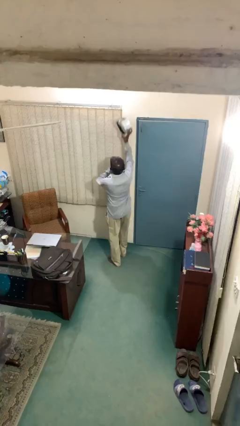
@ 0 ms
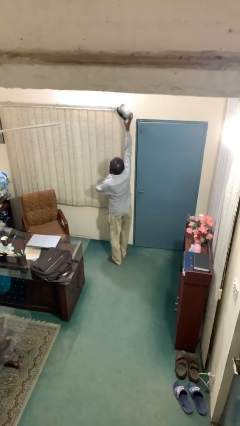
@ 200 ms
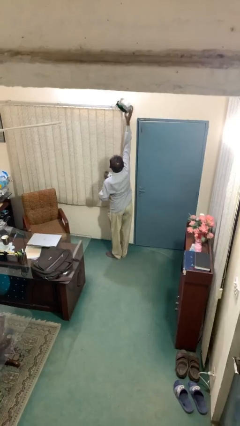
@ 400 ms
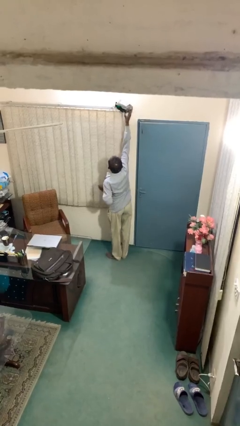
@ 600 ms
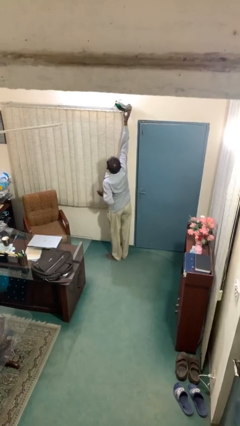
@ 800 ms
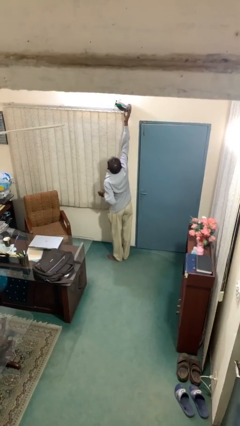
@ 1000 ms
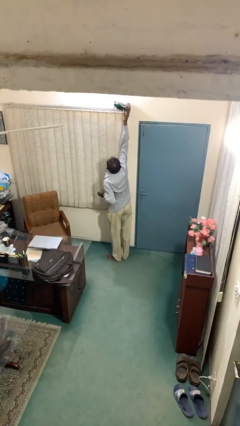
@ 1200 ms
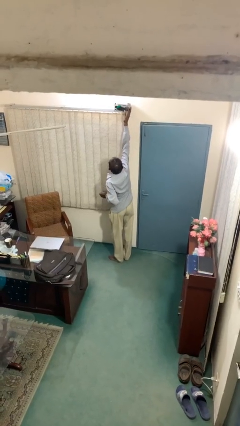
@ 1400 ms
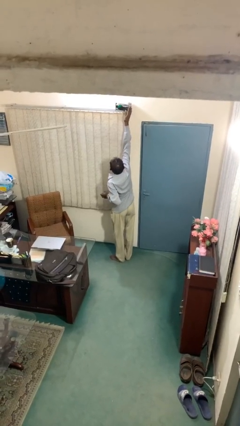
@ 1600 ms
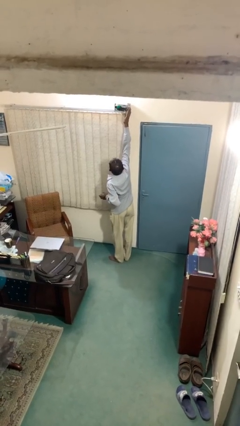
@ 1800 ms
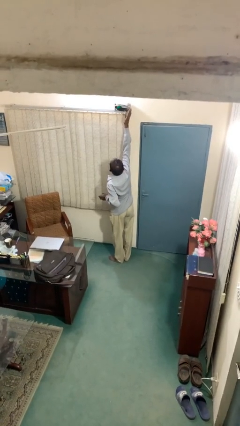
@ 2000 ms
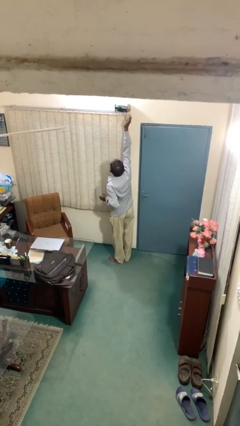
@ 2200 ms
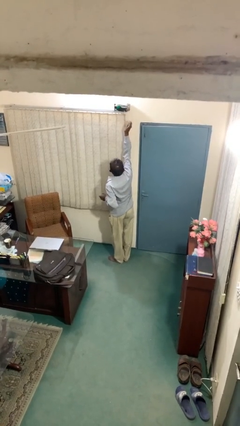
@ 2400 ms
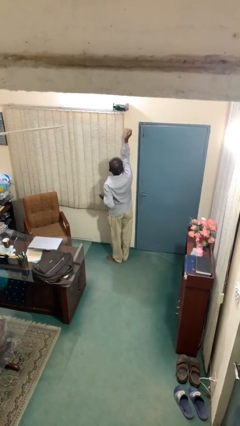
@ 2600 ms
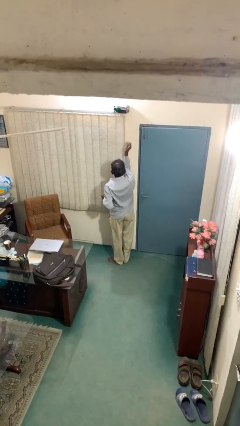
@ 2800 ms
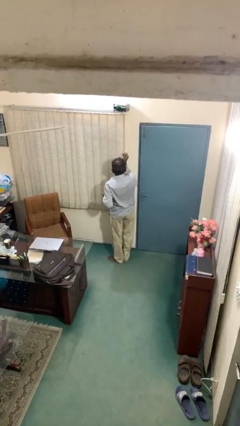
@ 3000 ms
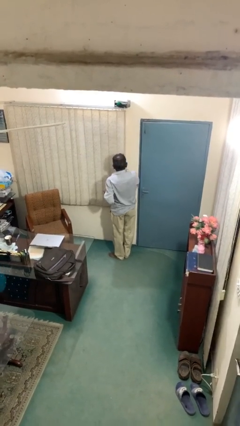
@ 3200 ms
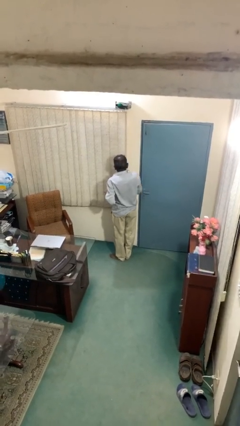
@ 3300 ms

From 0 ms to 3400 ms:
person puts down object on shelf

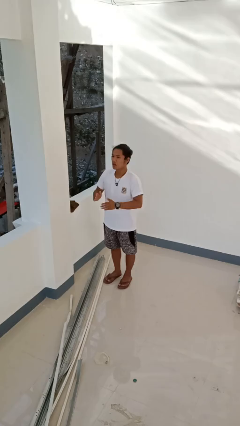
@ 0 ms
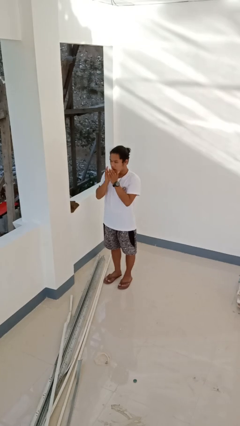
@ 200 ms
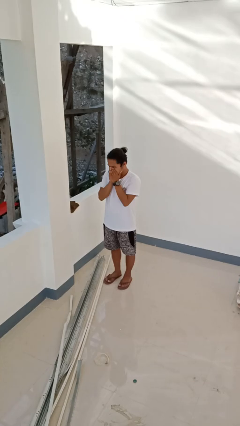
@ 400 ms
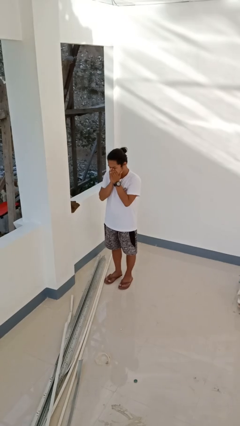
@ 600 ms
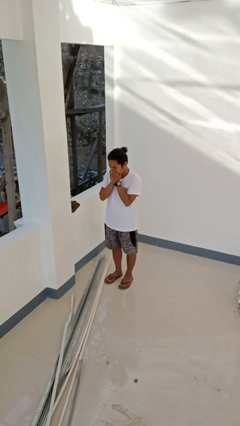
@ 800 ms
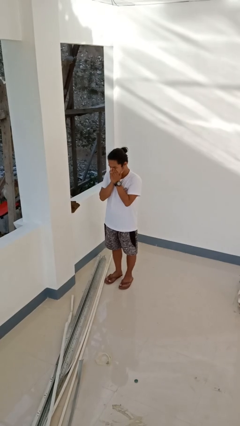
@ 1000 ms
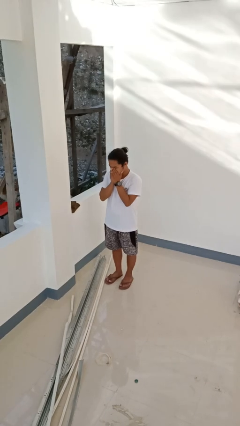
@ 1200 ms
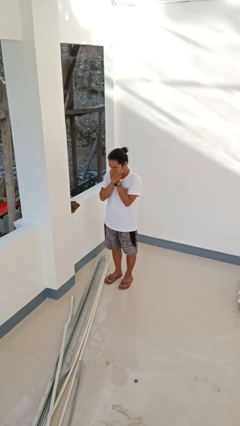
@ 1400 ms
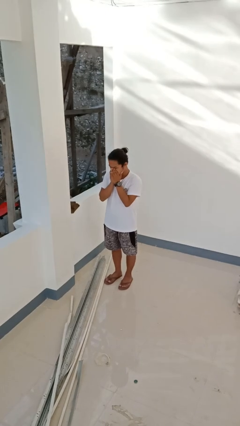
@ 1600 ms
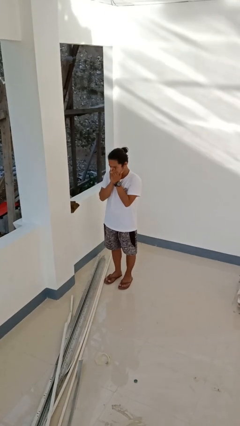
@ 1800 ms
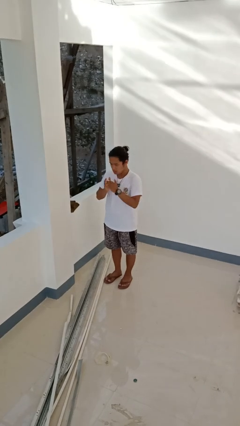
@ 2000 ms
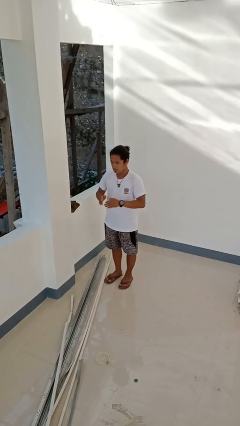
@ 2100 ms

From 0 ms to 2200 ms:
person sneezes into hand

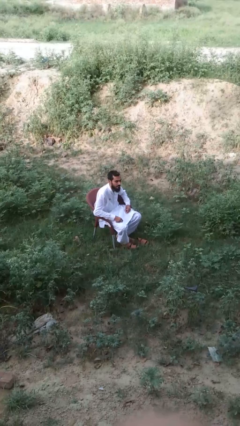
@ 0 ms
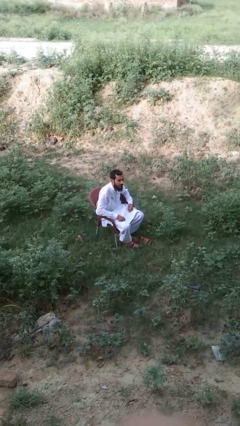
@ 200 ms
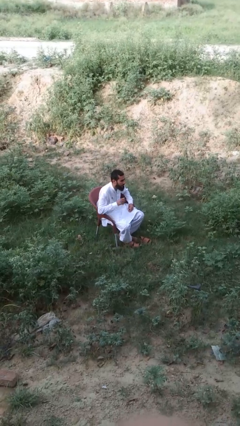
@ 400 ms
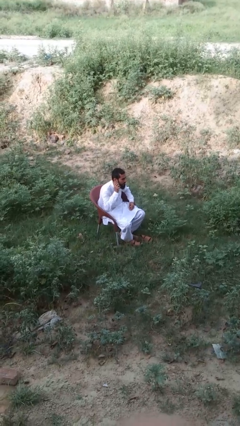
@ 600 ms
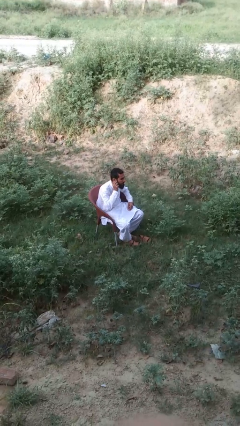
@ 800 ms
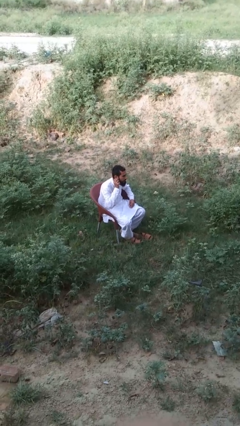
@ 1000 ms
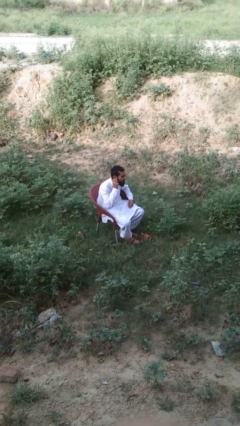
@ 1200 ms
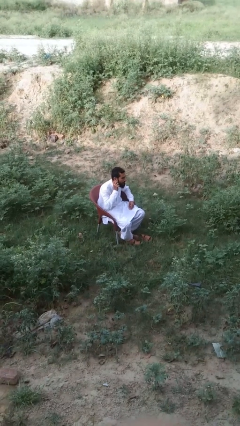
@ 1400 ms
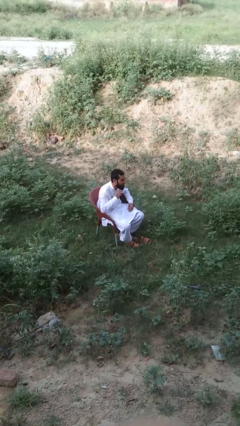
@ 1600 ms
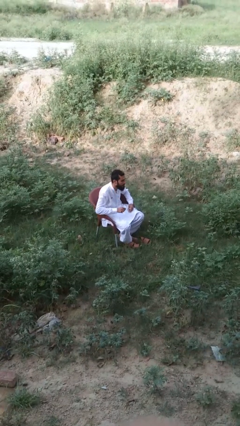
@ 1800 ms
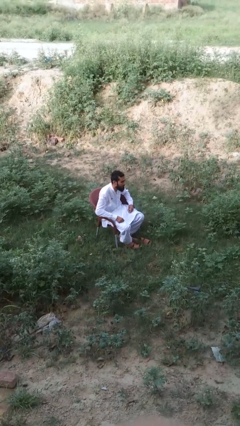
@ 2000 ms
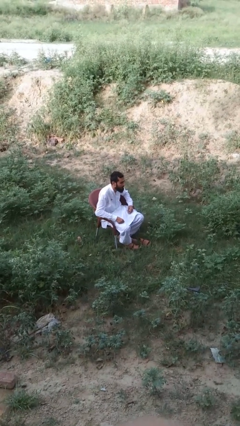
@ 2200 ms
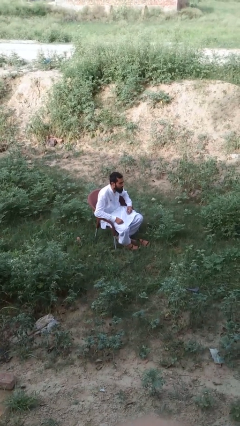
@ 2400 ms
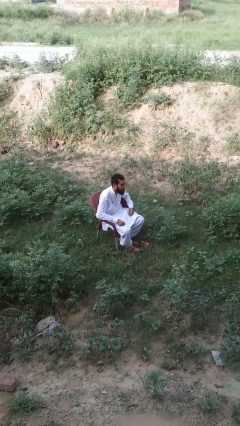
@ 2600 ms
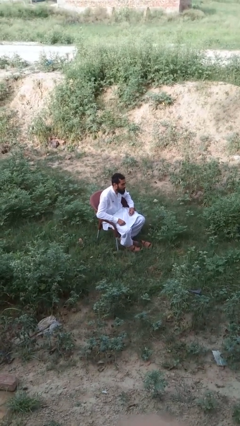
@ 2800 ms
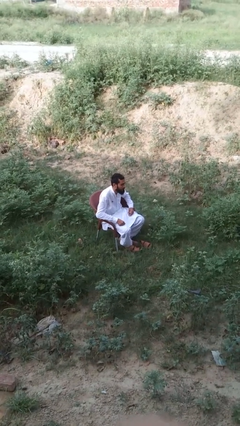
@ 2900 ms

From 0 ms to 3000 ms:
person touches earlobe

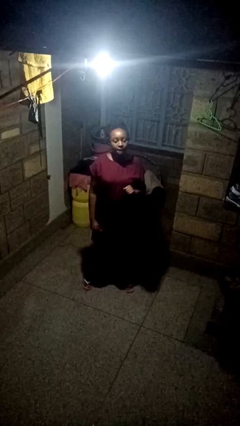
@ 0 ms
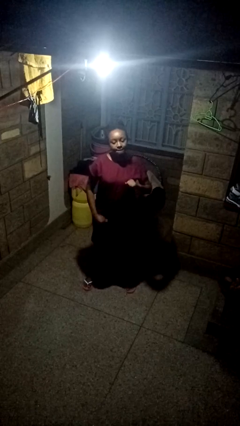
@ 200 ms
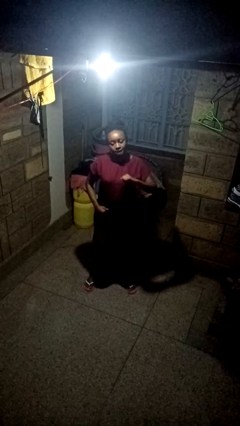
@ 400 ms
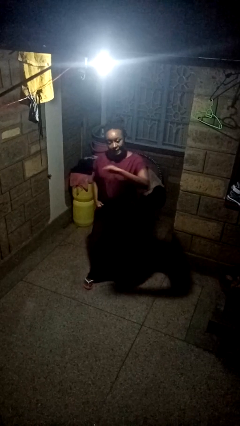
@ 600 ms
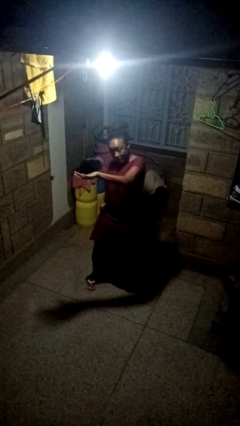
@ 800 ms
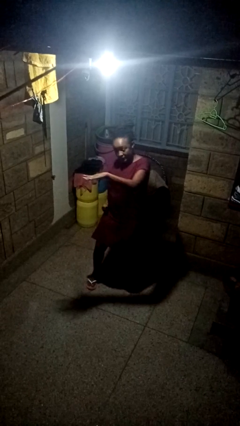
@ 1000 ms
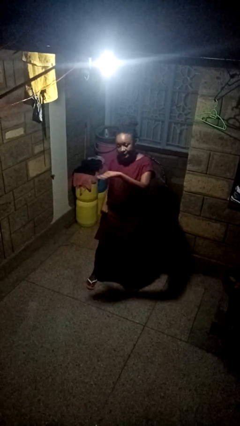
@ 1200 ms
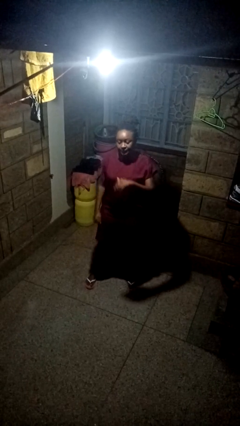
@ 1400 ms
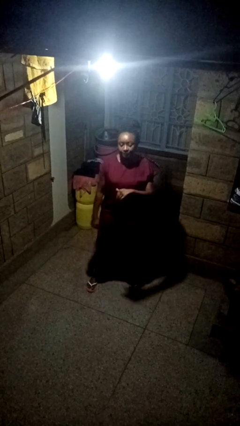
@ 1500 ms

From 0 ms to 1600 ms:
person karate chop

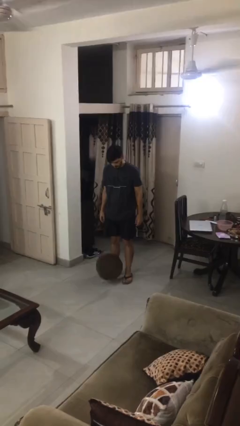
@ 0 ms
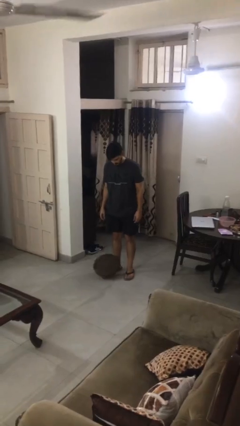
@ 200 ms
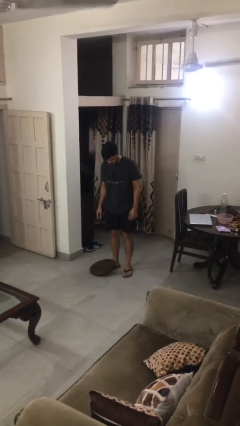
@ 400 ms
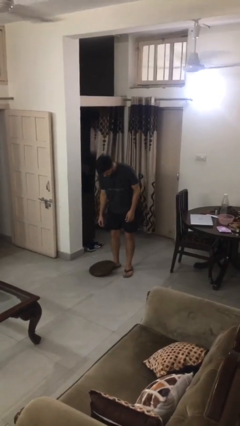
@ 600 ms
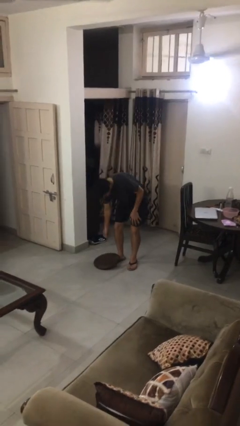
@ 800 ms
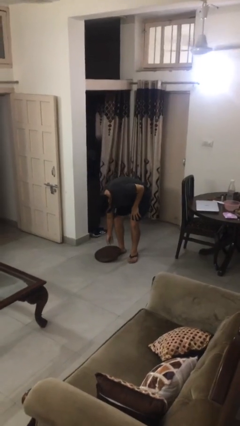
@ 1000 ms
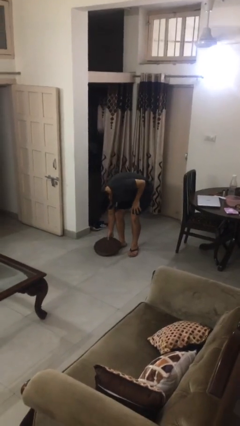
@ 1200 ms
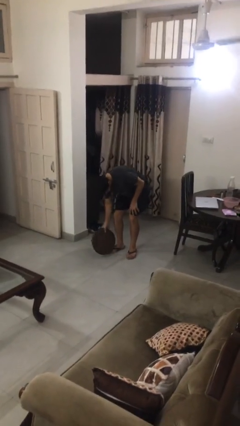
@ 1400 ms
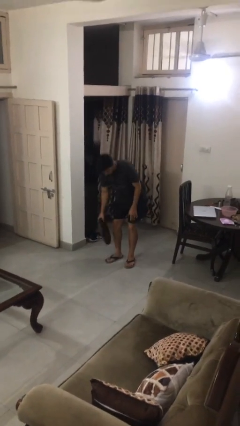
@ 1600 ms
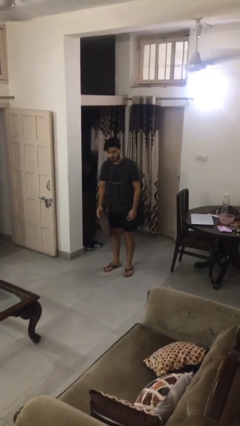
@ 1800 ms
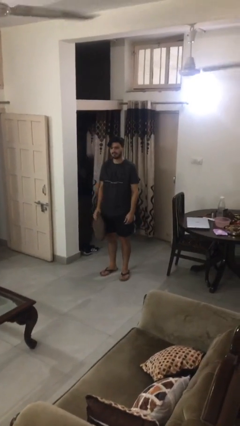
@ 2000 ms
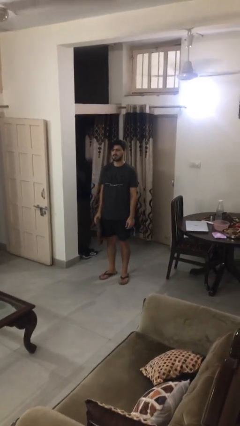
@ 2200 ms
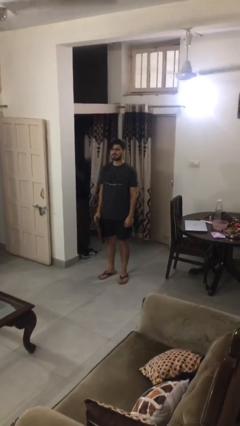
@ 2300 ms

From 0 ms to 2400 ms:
person picks up object from floor

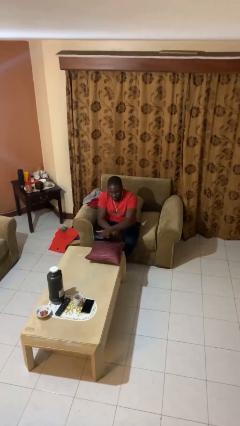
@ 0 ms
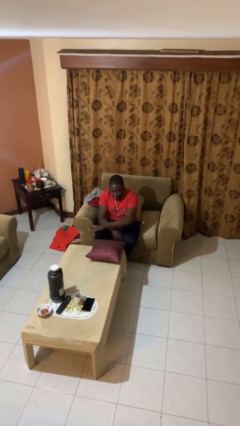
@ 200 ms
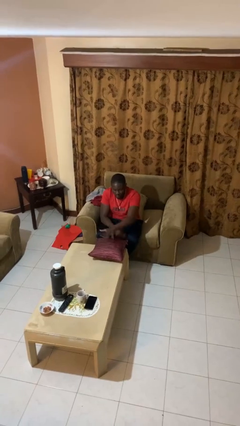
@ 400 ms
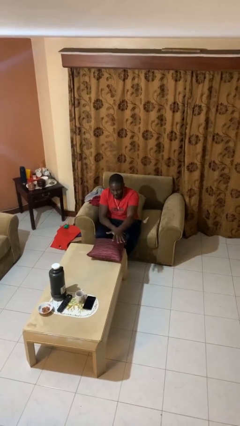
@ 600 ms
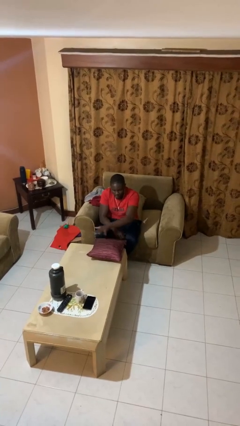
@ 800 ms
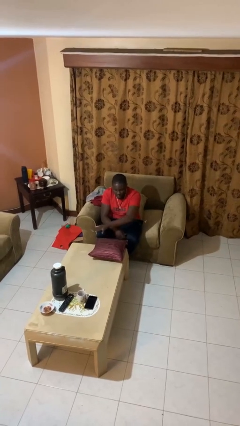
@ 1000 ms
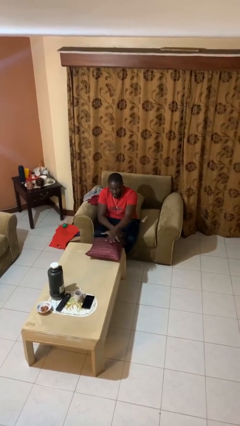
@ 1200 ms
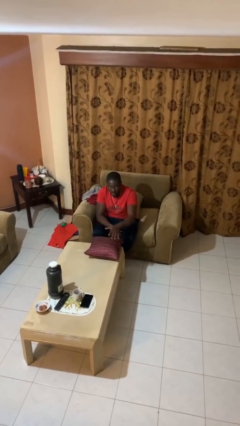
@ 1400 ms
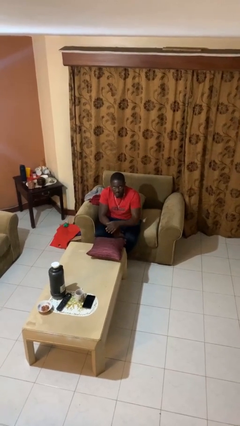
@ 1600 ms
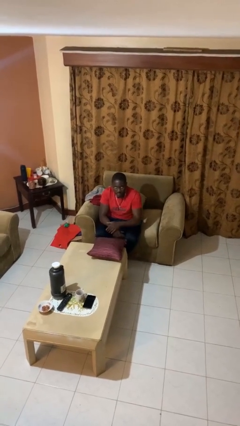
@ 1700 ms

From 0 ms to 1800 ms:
person waves hand over object

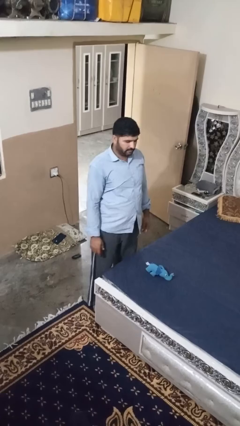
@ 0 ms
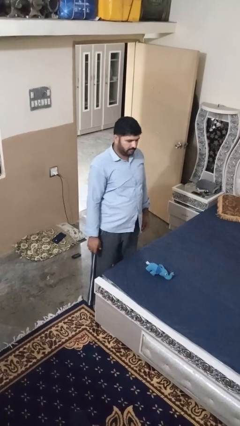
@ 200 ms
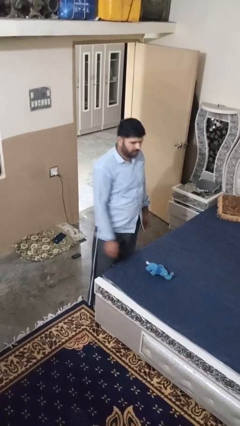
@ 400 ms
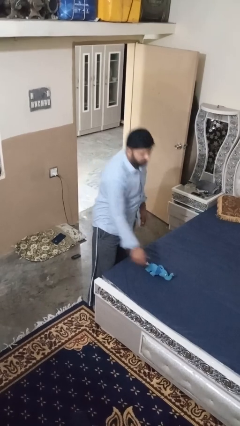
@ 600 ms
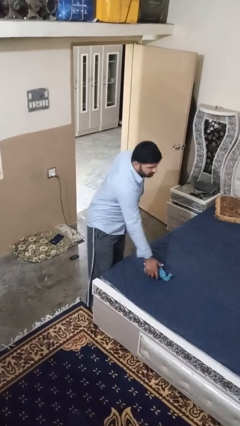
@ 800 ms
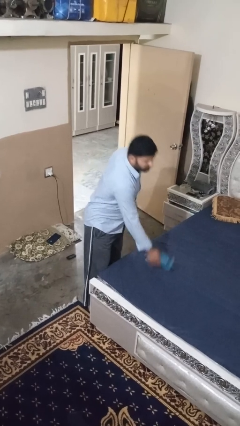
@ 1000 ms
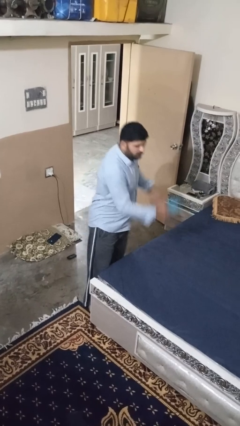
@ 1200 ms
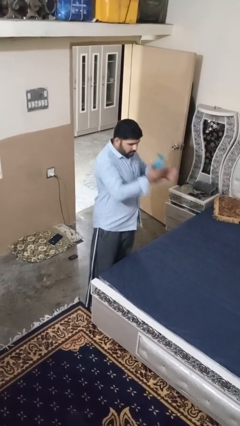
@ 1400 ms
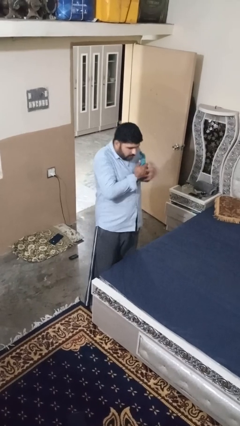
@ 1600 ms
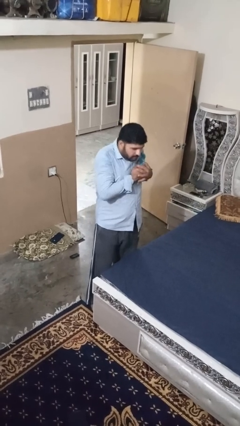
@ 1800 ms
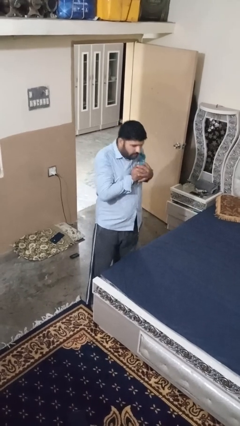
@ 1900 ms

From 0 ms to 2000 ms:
person hugs stuffed animal

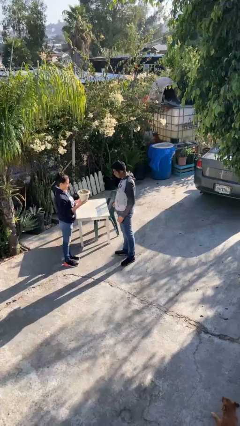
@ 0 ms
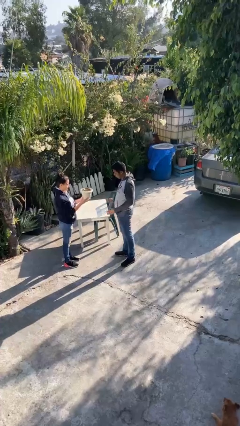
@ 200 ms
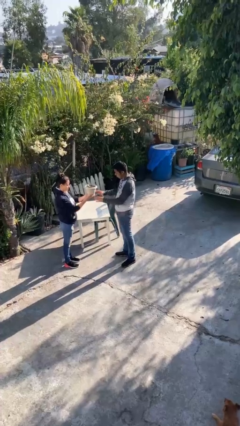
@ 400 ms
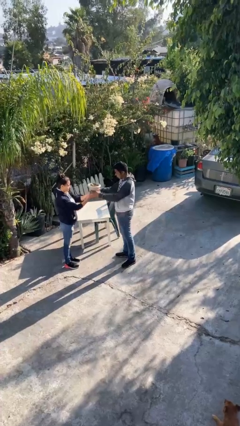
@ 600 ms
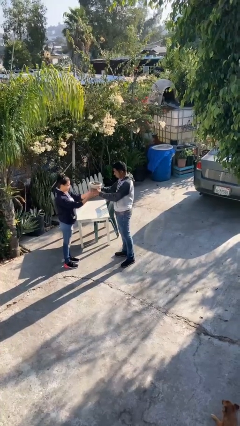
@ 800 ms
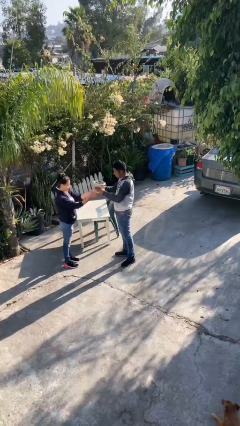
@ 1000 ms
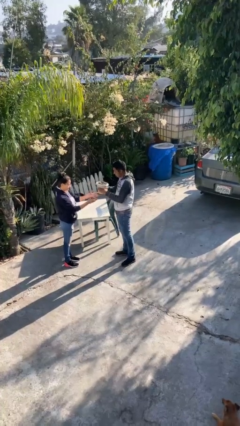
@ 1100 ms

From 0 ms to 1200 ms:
person transfers object to person
